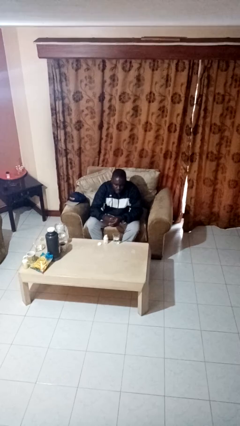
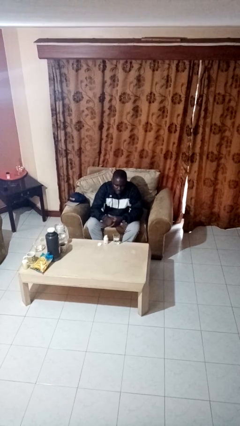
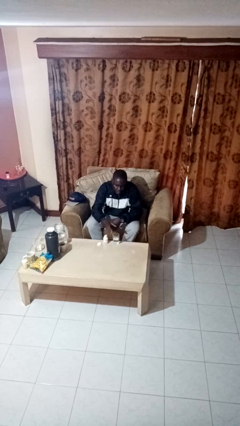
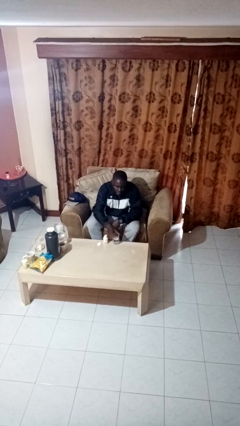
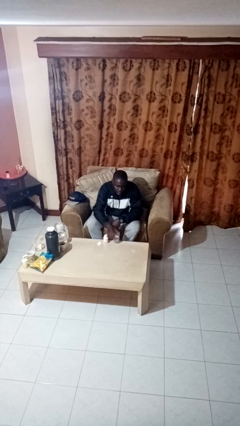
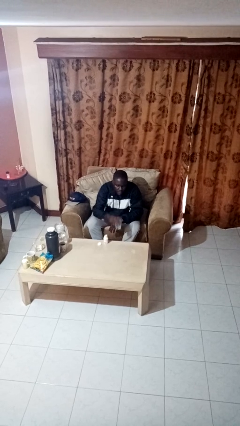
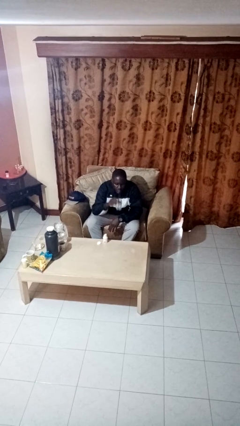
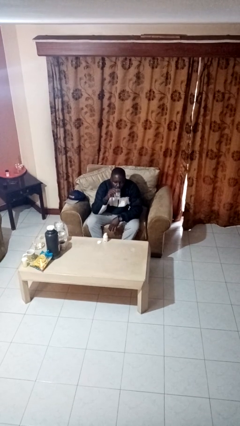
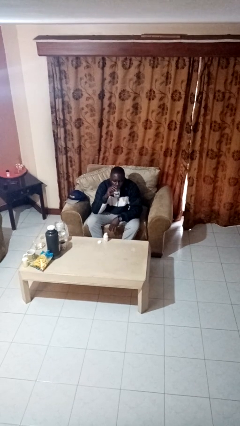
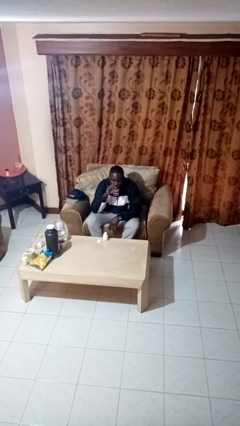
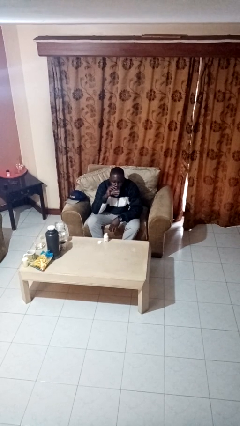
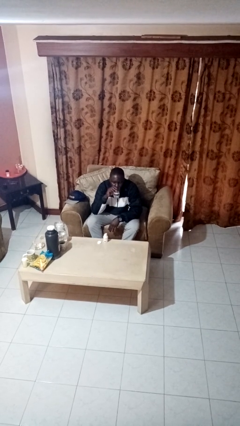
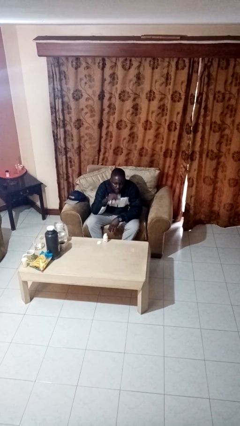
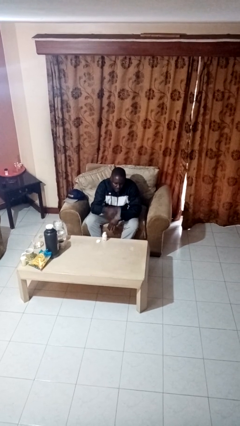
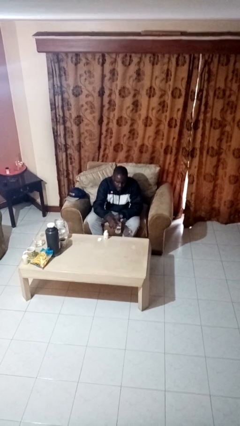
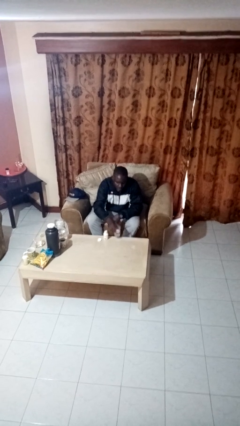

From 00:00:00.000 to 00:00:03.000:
person drinks from cup

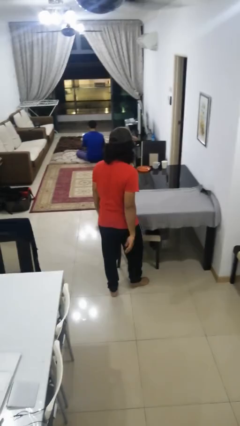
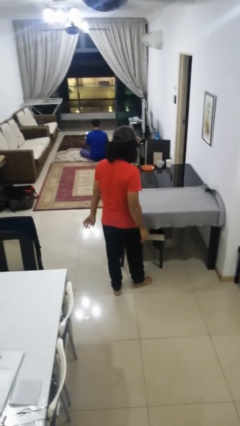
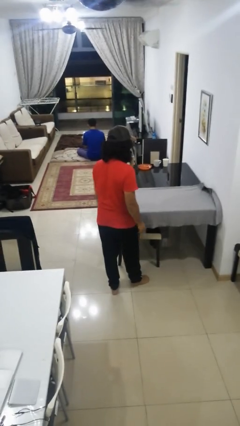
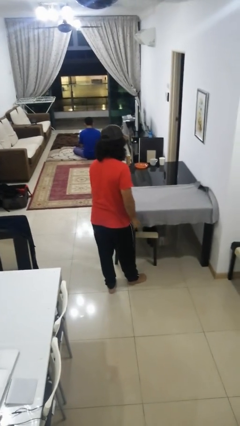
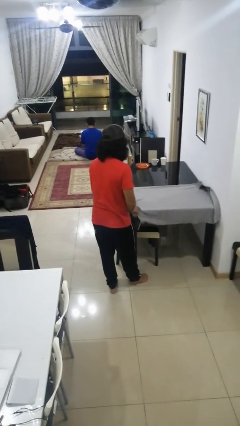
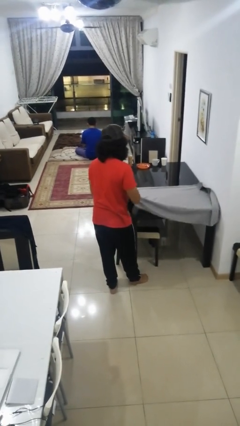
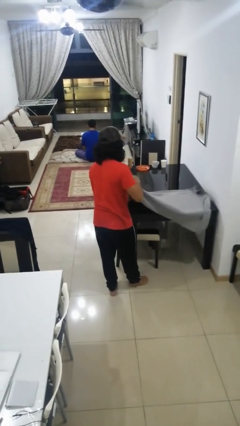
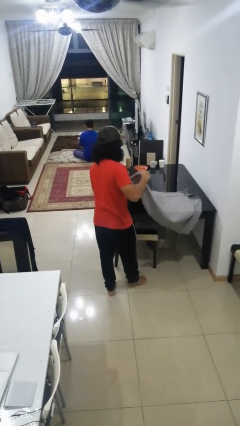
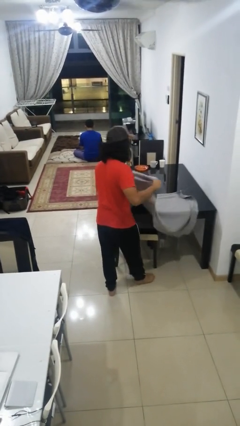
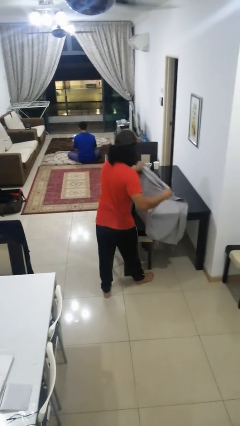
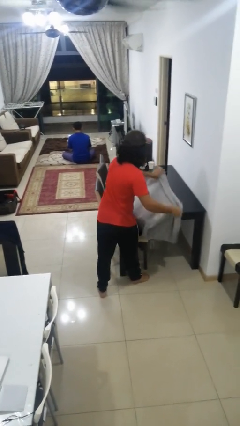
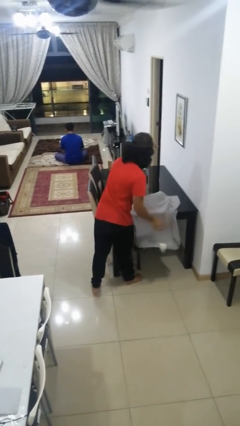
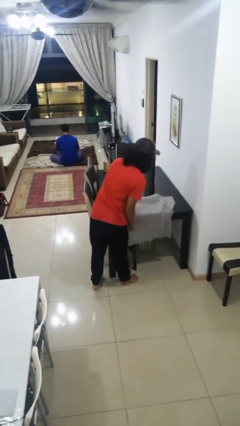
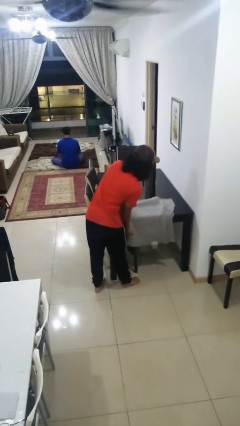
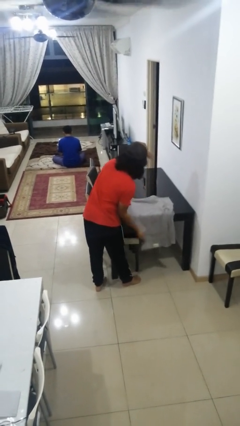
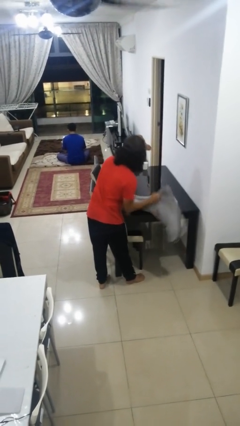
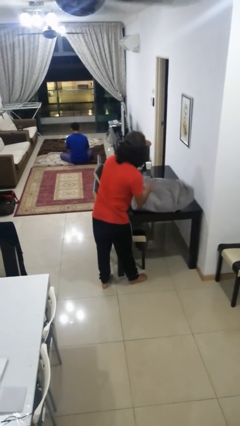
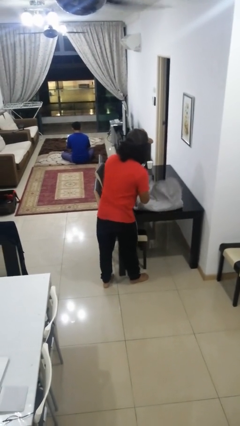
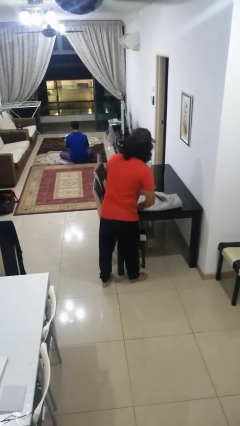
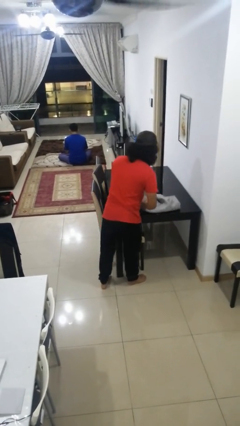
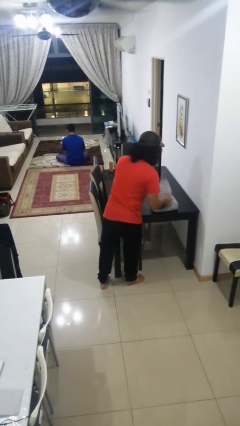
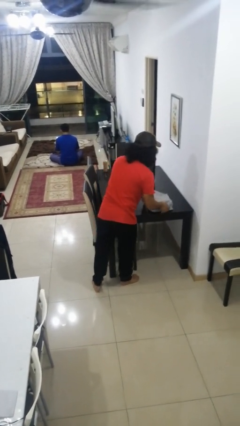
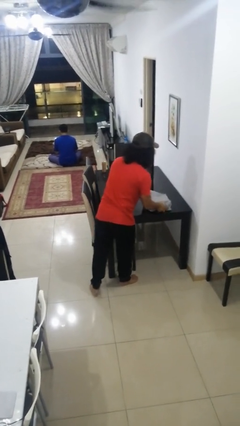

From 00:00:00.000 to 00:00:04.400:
person folds tablecloth

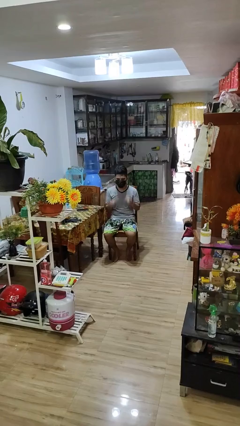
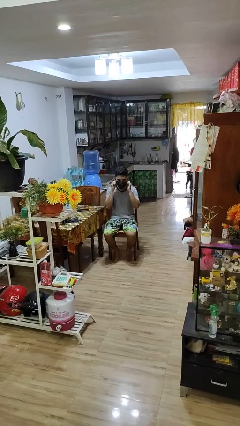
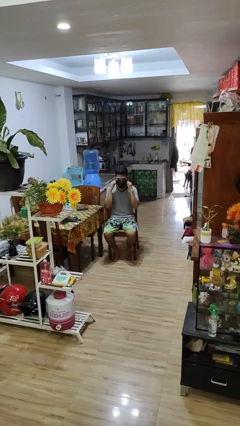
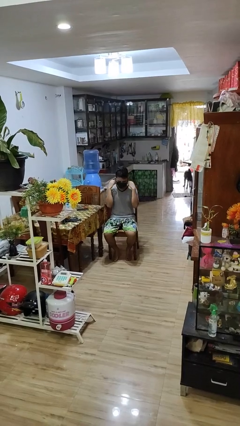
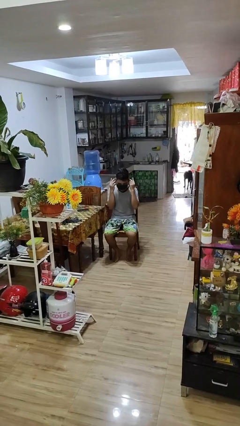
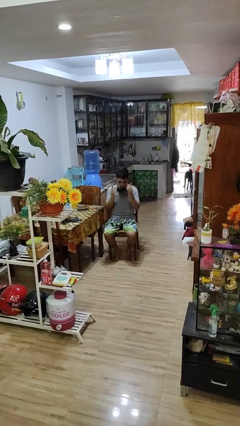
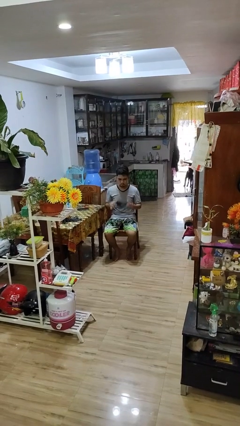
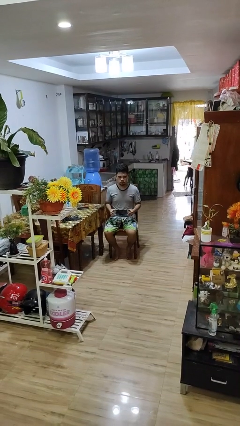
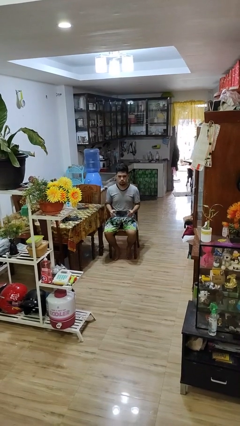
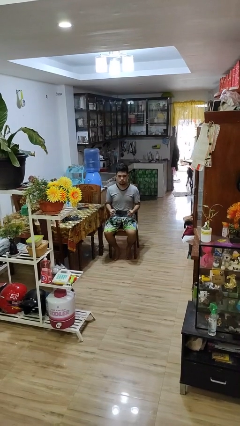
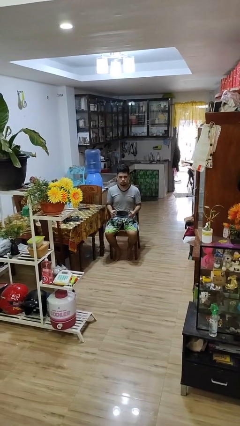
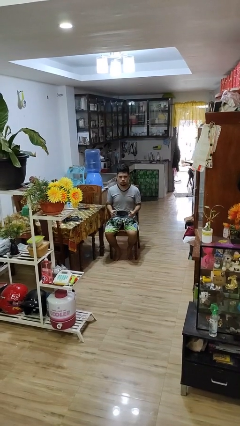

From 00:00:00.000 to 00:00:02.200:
person takes off facemask

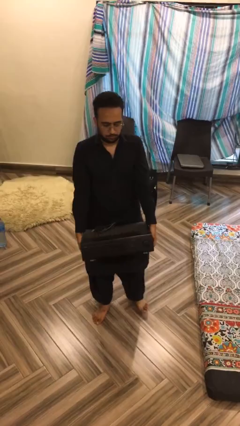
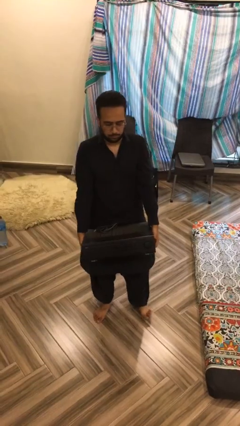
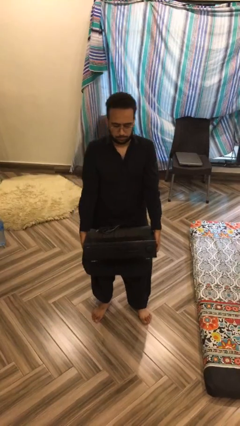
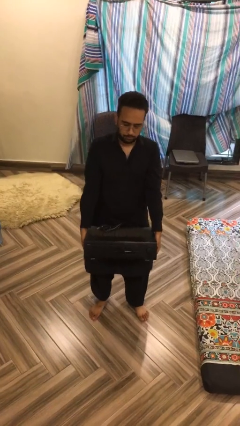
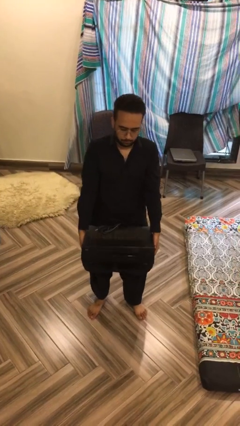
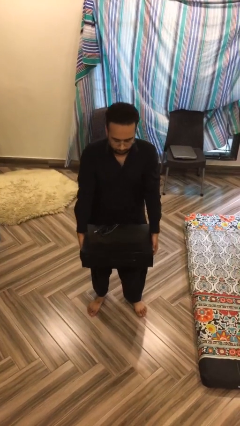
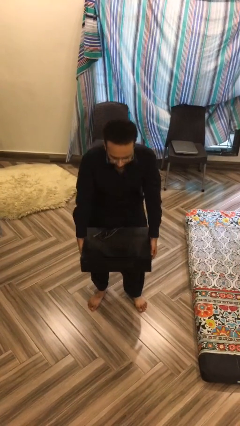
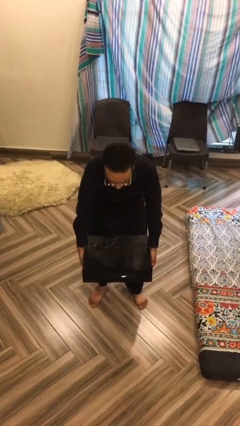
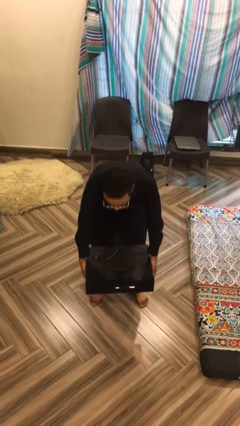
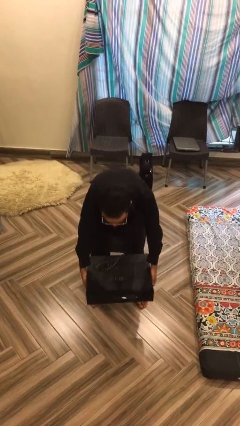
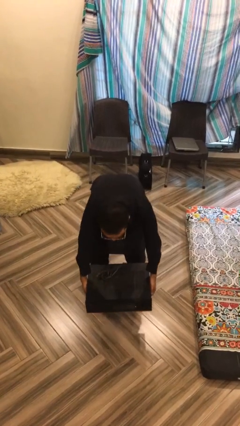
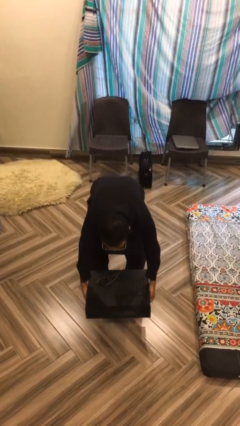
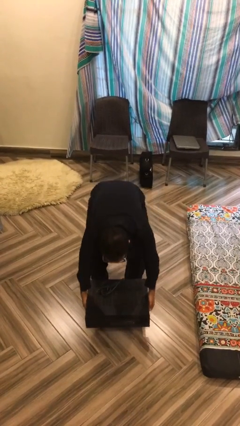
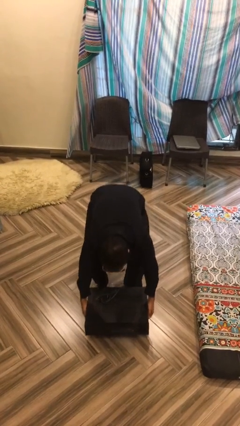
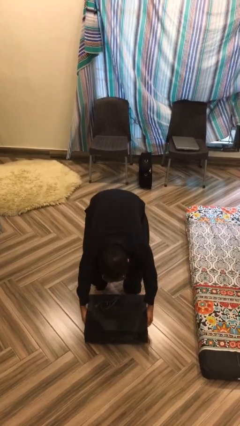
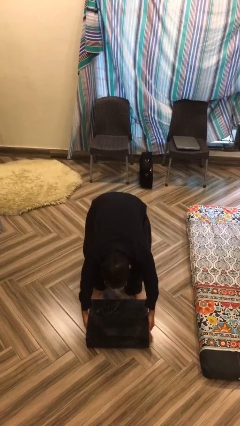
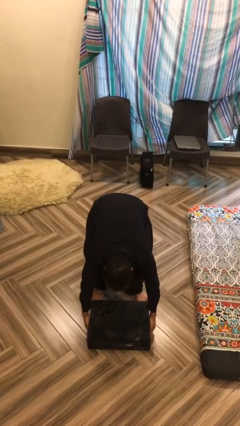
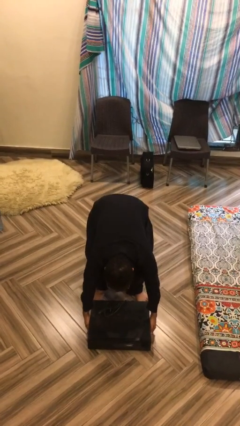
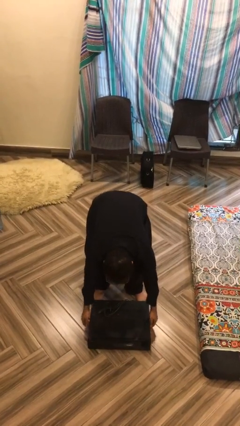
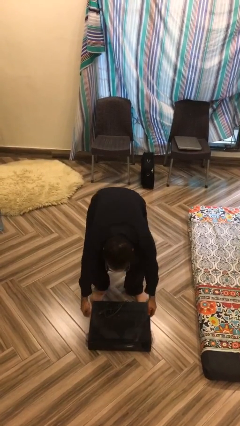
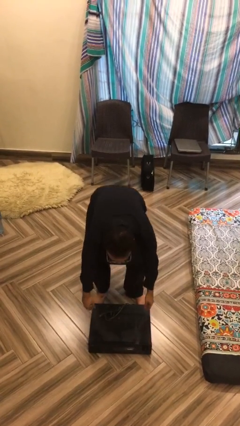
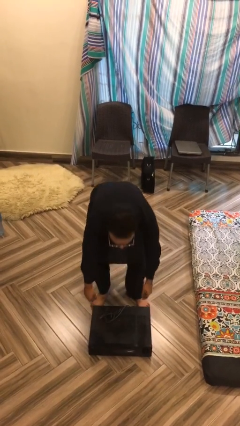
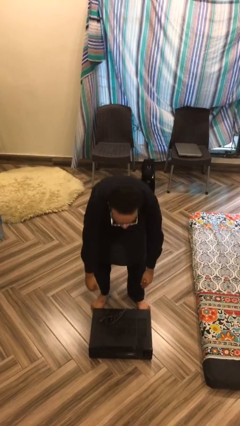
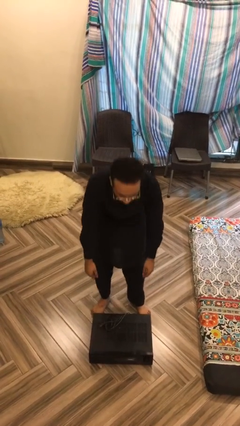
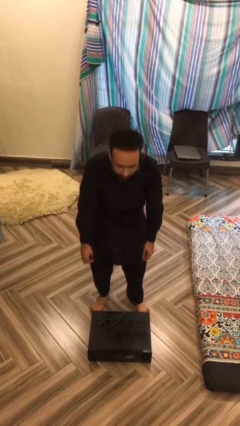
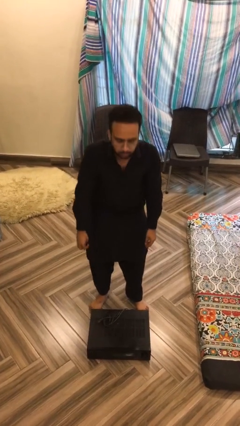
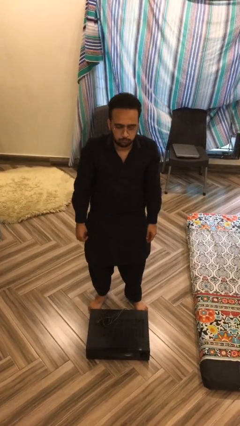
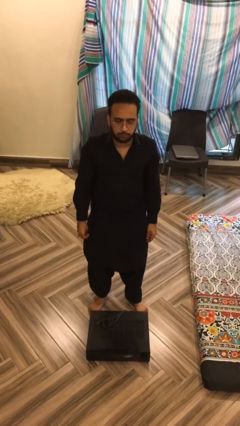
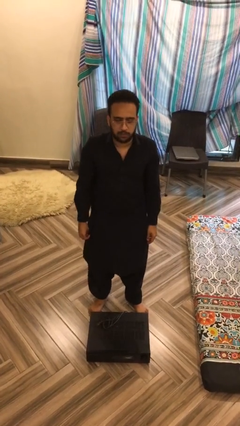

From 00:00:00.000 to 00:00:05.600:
person puts down object on floor

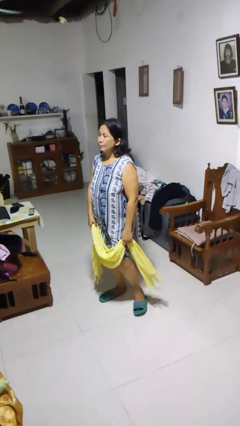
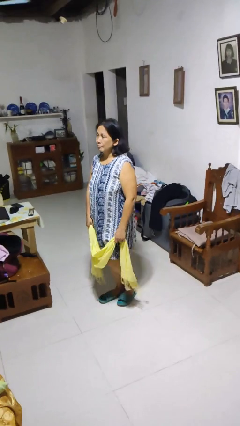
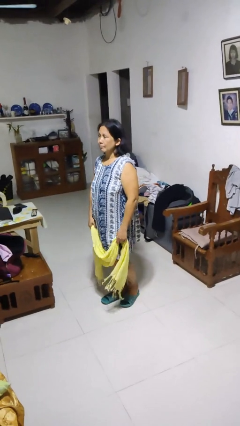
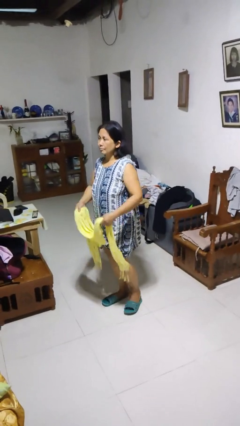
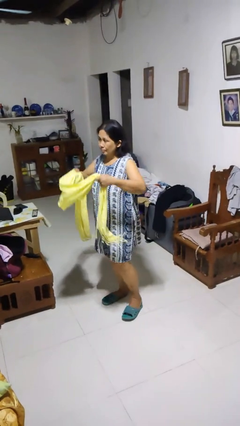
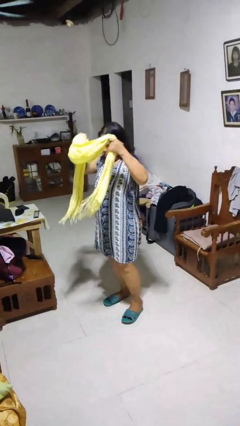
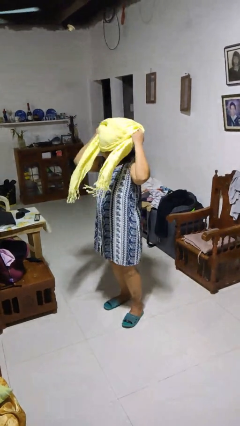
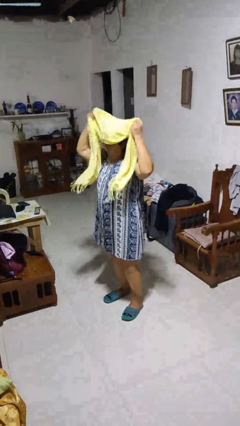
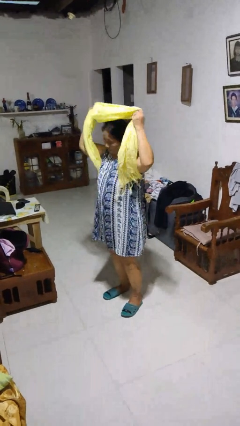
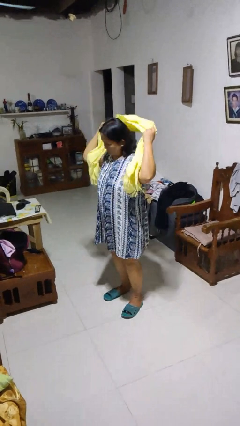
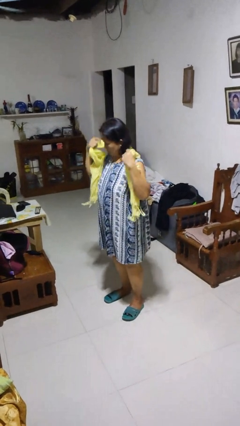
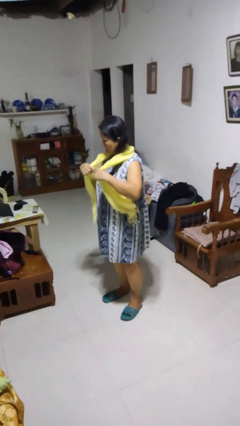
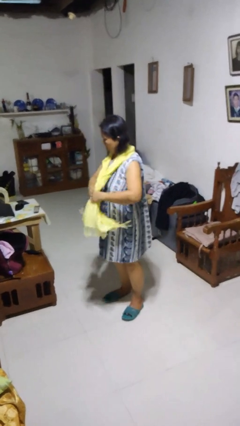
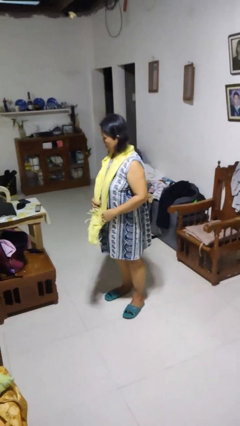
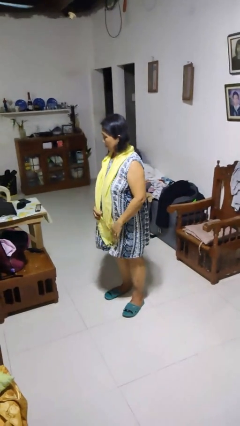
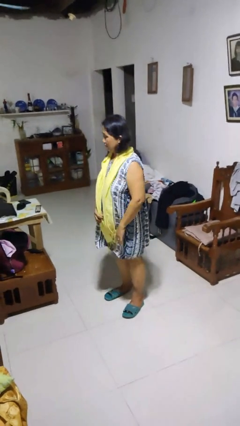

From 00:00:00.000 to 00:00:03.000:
person puts on scarf
